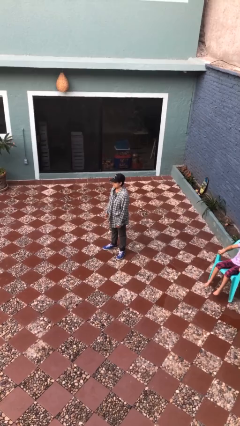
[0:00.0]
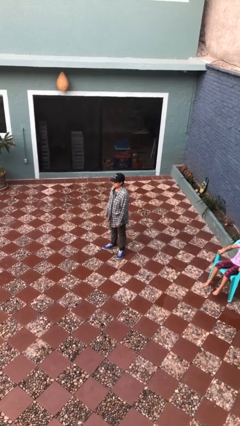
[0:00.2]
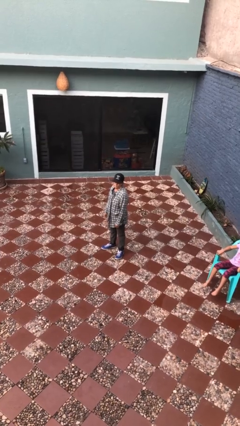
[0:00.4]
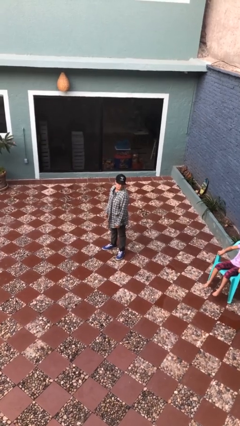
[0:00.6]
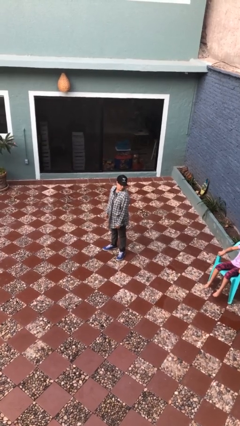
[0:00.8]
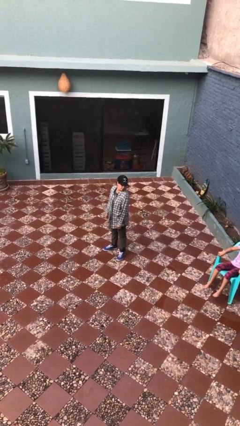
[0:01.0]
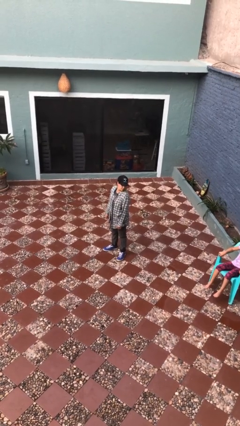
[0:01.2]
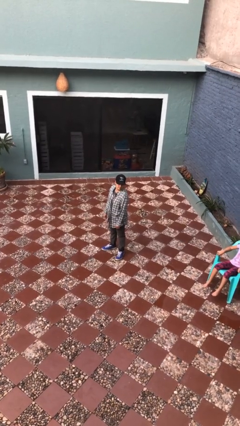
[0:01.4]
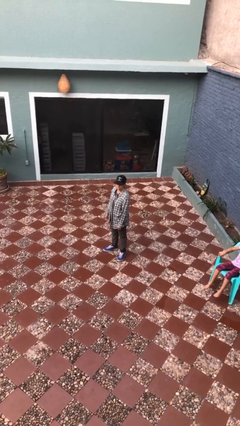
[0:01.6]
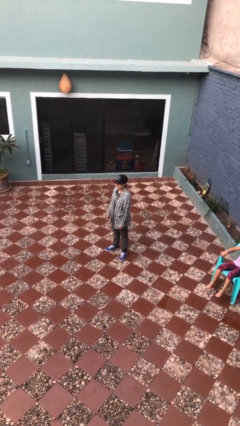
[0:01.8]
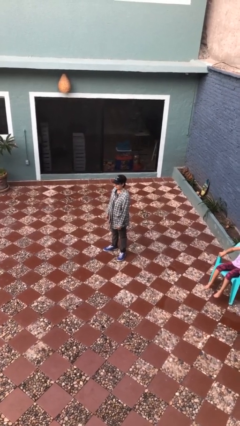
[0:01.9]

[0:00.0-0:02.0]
person looks over shoulder

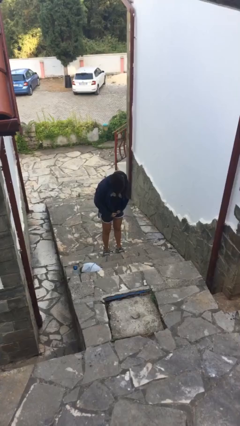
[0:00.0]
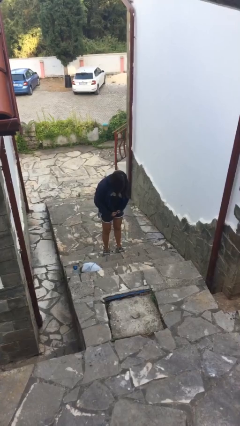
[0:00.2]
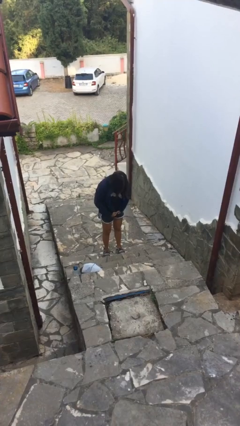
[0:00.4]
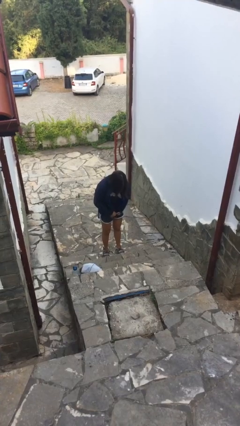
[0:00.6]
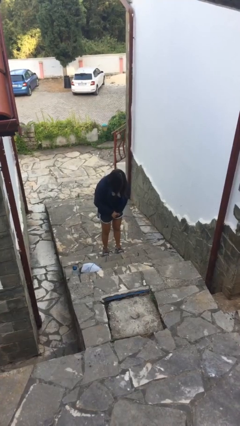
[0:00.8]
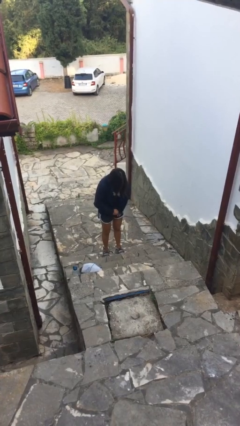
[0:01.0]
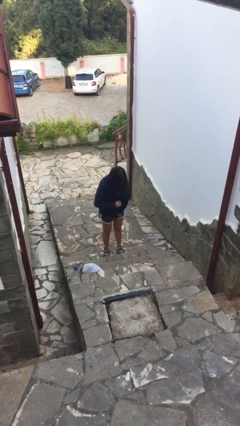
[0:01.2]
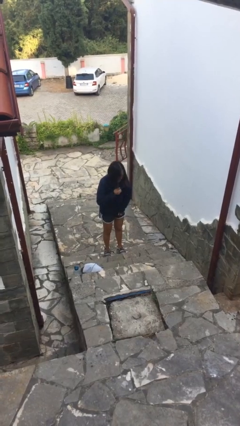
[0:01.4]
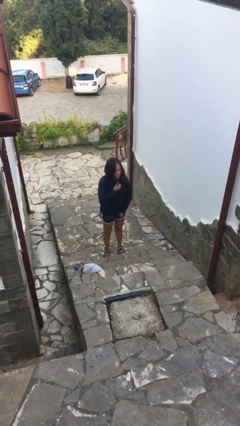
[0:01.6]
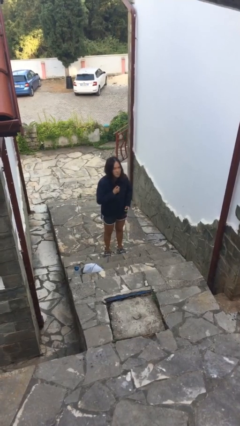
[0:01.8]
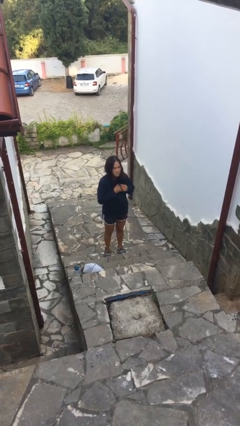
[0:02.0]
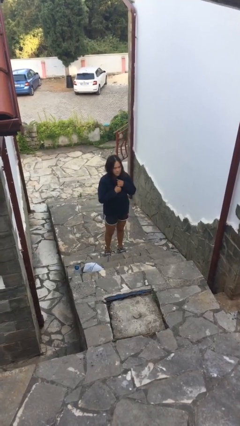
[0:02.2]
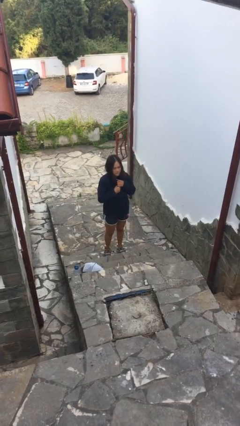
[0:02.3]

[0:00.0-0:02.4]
person zips up jacket

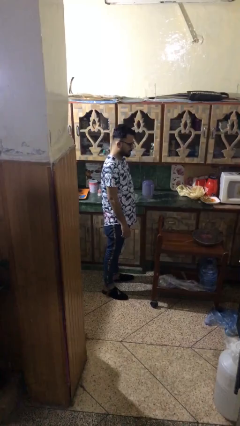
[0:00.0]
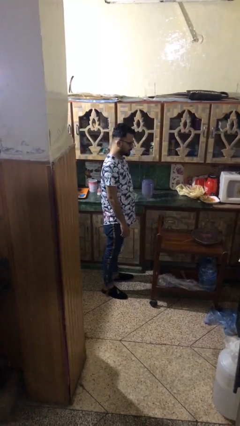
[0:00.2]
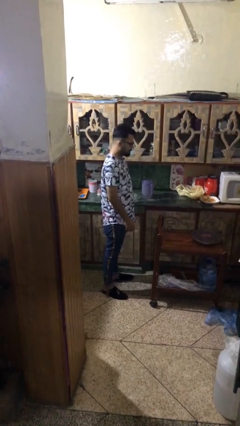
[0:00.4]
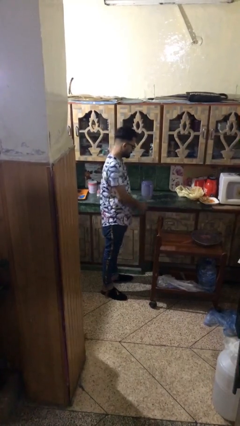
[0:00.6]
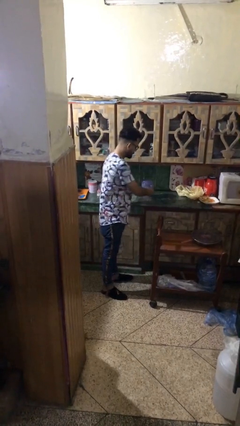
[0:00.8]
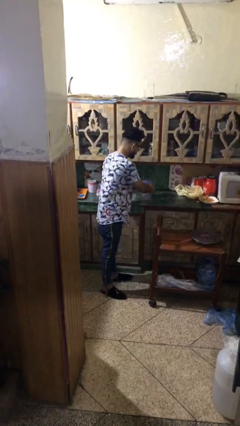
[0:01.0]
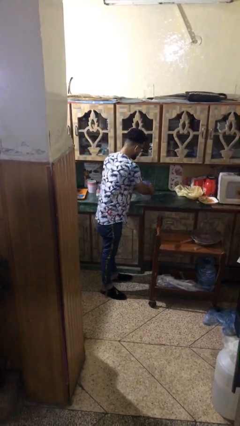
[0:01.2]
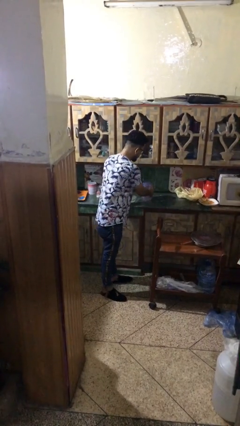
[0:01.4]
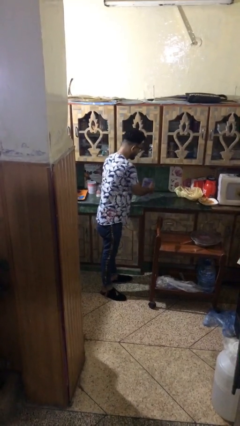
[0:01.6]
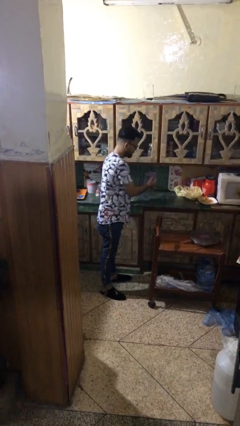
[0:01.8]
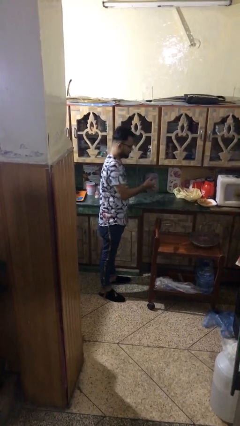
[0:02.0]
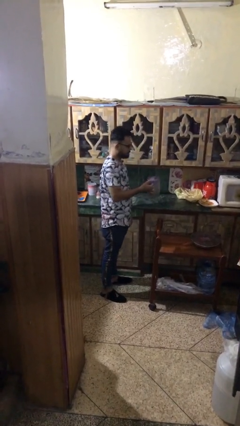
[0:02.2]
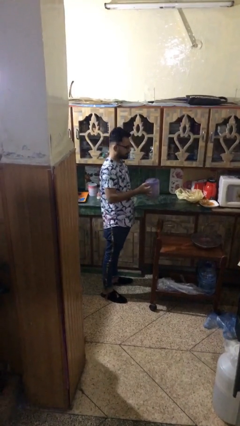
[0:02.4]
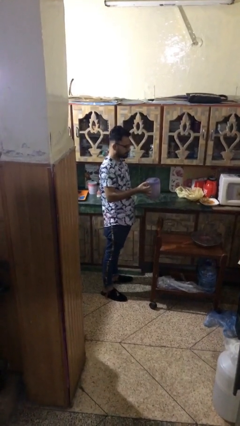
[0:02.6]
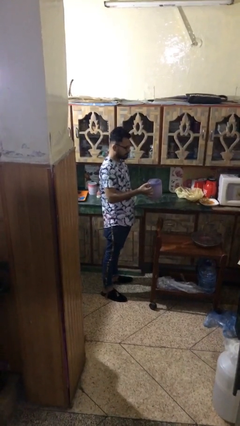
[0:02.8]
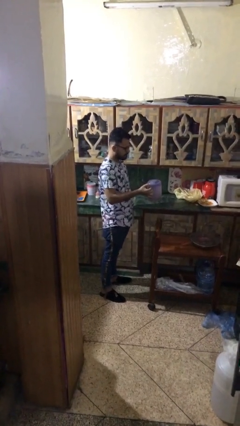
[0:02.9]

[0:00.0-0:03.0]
person picks up object from shelf

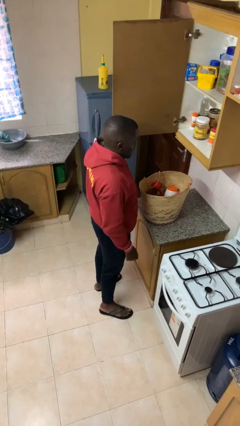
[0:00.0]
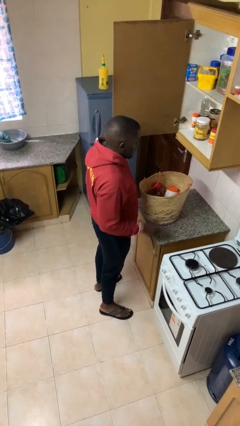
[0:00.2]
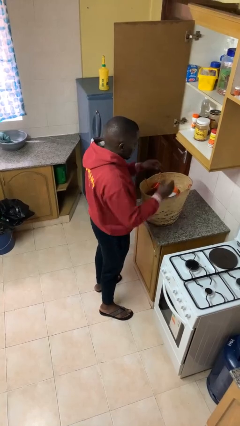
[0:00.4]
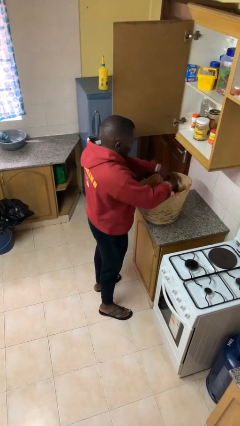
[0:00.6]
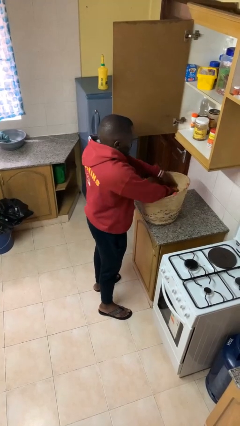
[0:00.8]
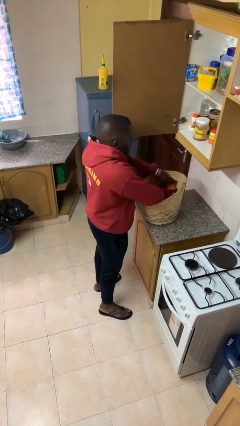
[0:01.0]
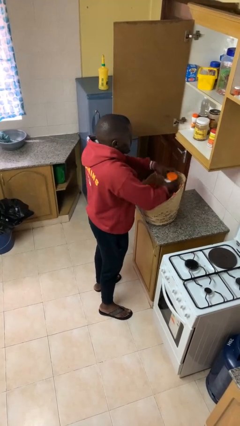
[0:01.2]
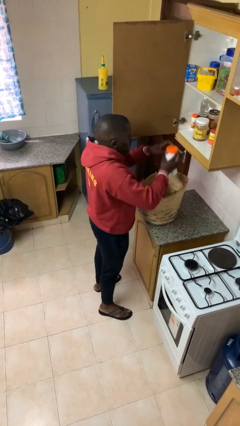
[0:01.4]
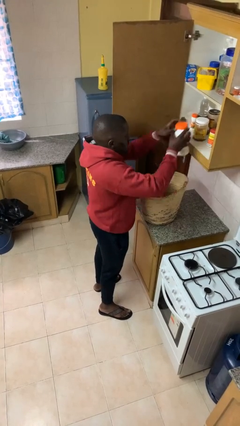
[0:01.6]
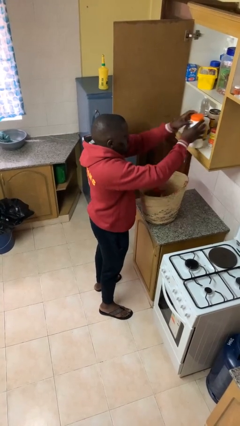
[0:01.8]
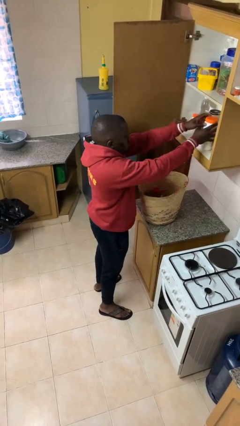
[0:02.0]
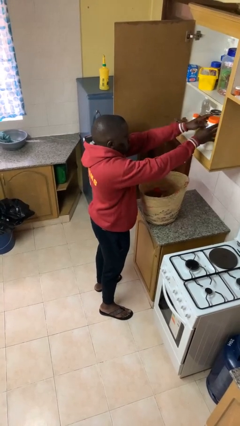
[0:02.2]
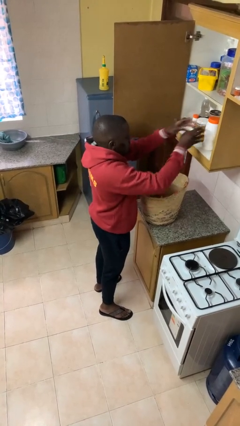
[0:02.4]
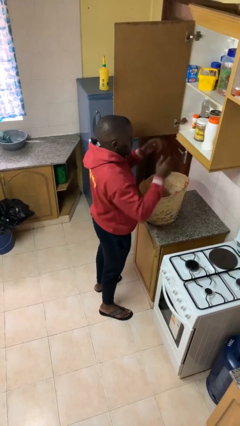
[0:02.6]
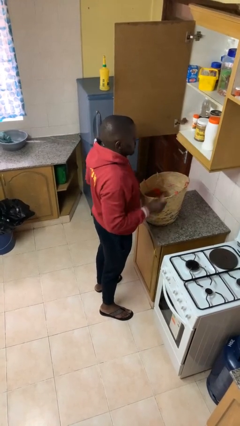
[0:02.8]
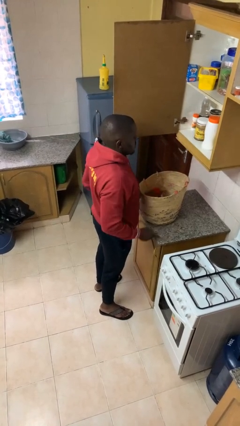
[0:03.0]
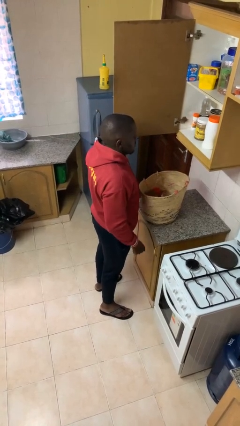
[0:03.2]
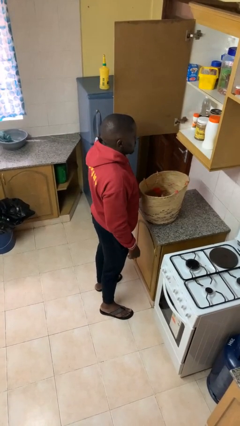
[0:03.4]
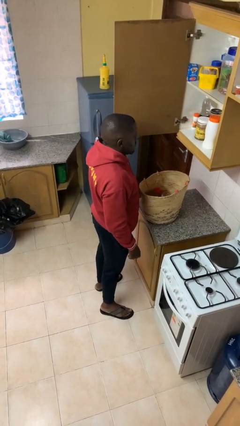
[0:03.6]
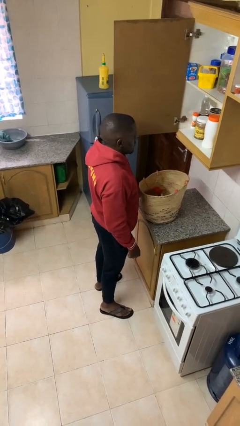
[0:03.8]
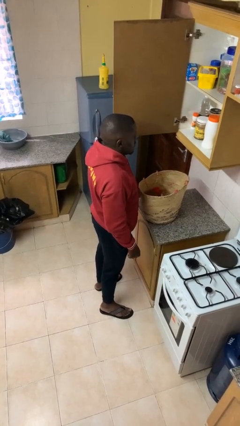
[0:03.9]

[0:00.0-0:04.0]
person loads groceries into cabinet

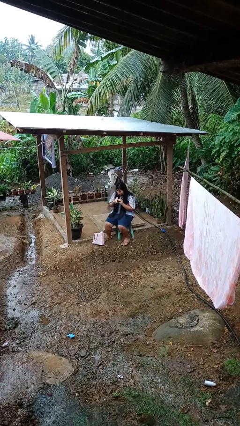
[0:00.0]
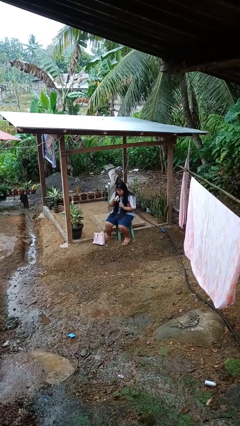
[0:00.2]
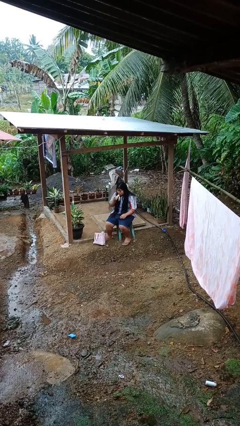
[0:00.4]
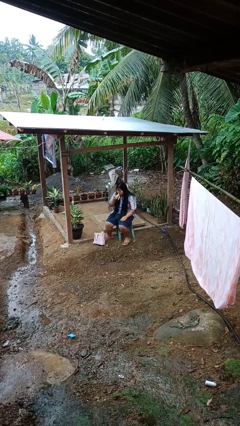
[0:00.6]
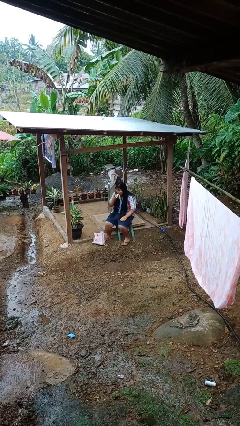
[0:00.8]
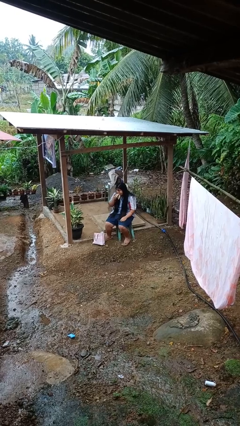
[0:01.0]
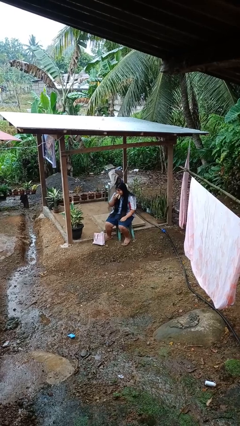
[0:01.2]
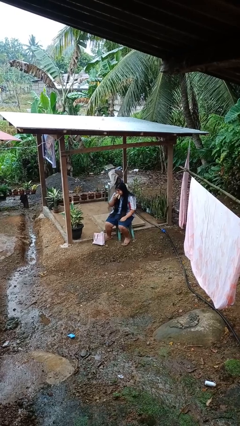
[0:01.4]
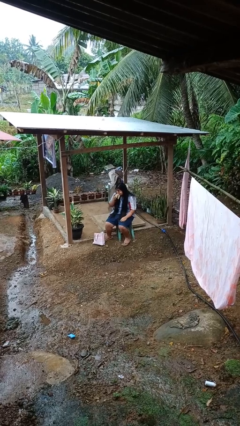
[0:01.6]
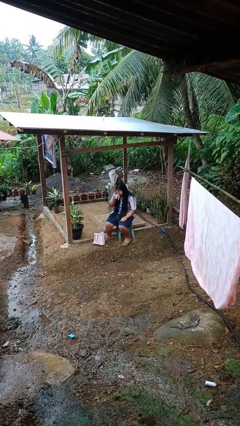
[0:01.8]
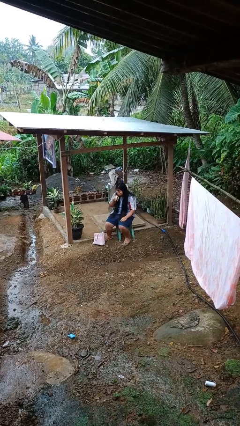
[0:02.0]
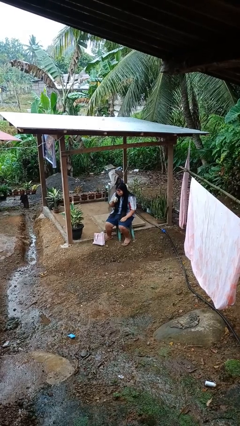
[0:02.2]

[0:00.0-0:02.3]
person eats banana

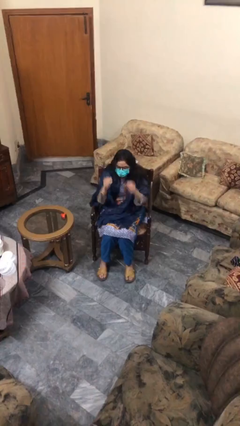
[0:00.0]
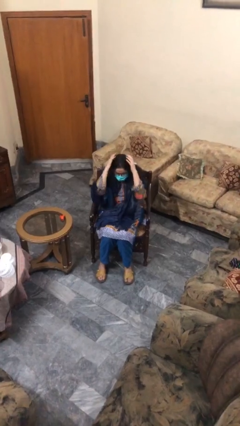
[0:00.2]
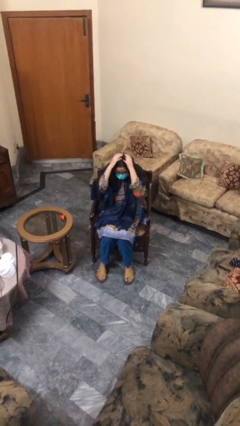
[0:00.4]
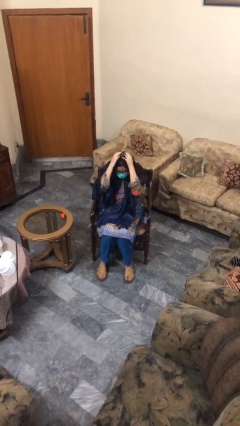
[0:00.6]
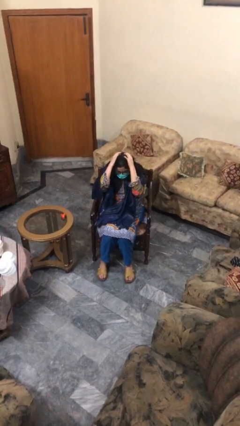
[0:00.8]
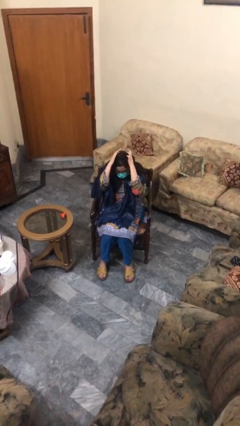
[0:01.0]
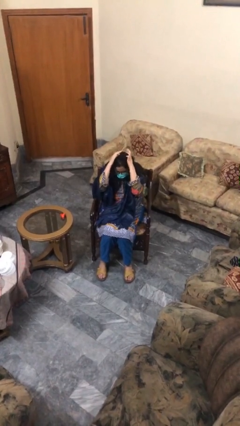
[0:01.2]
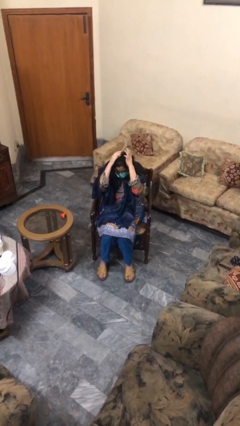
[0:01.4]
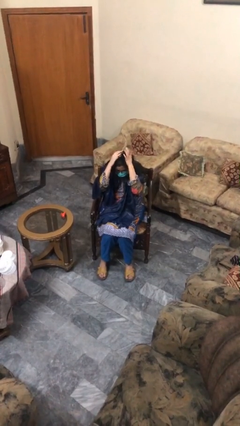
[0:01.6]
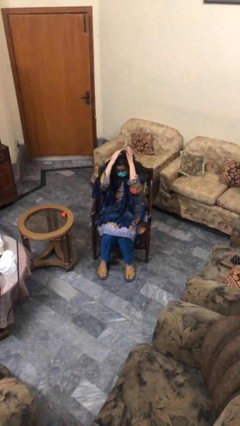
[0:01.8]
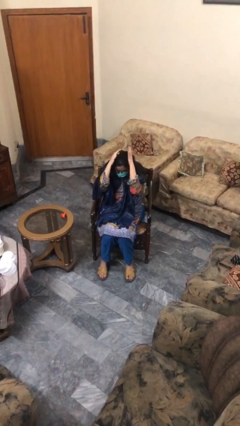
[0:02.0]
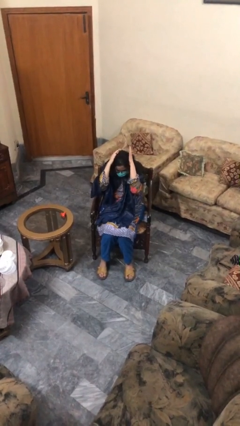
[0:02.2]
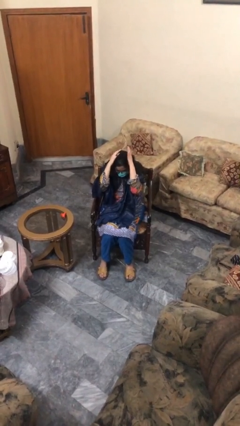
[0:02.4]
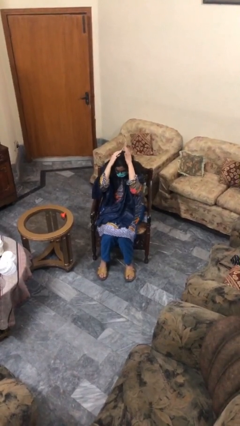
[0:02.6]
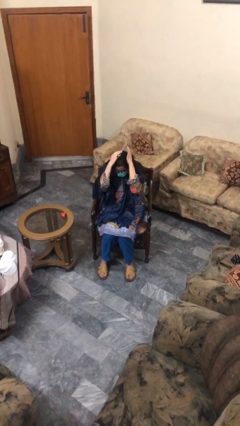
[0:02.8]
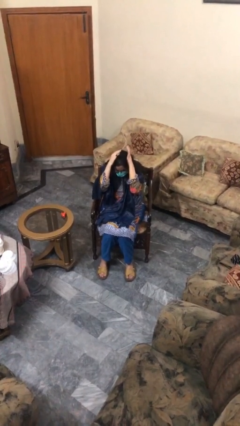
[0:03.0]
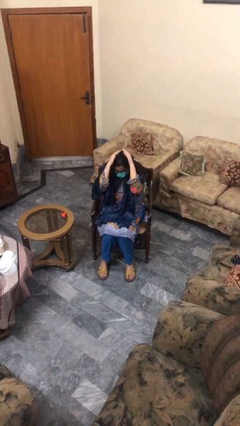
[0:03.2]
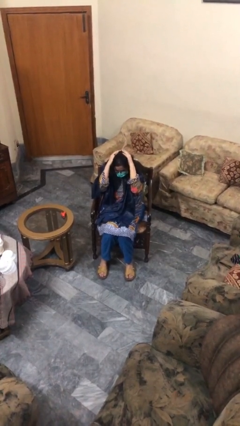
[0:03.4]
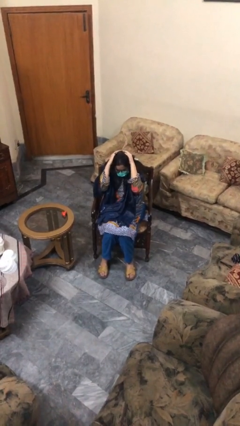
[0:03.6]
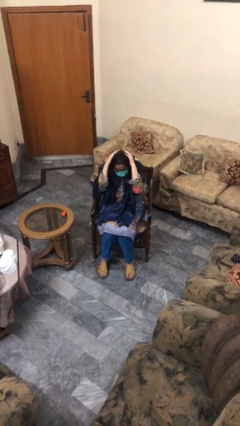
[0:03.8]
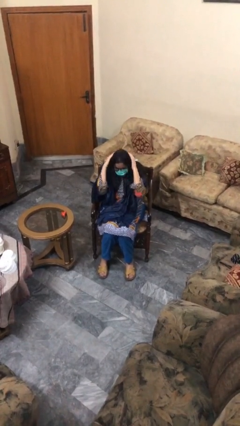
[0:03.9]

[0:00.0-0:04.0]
person pats head
